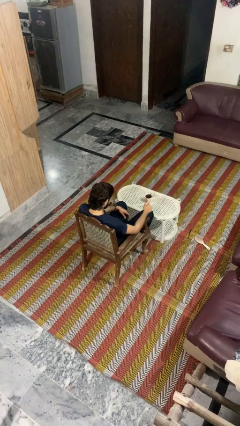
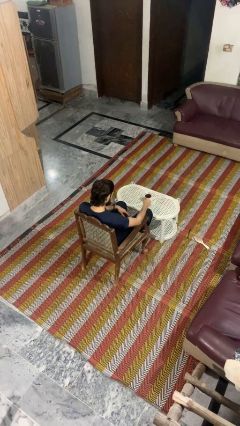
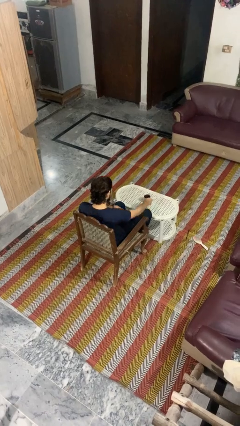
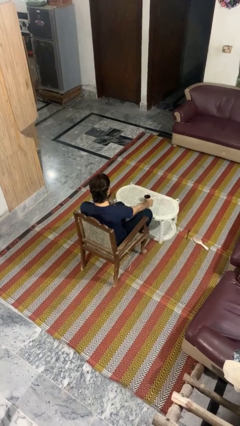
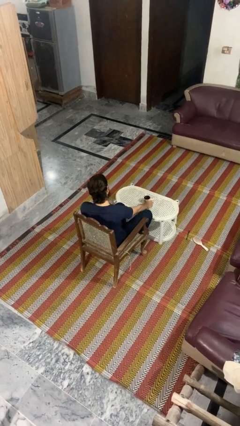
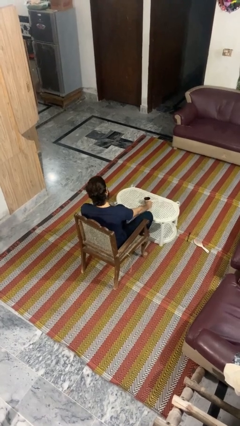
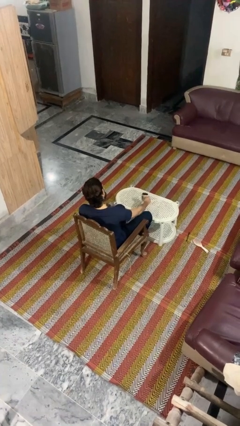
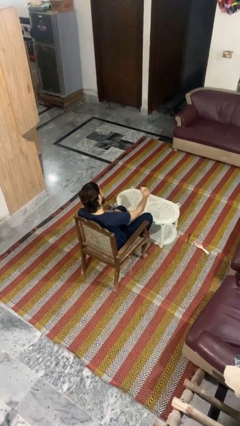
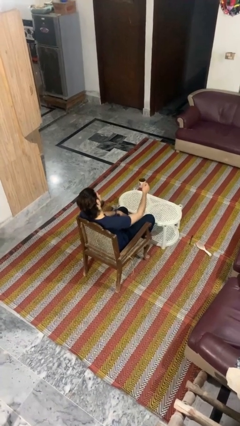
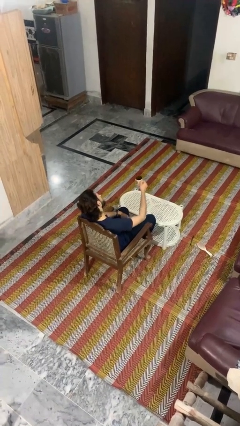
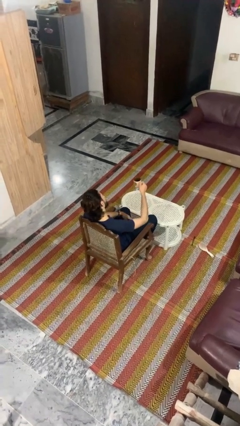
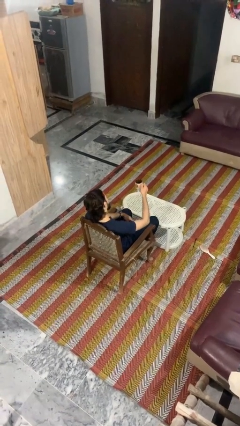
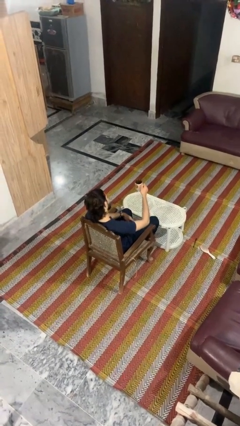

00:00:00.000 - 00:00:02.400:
person picks up object from table

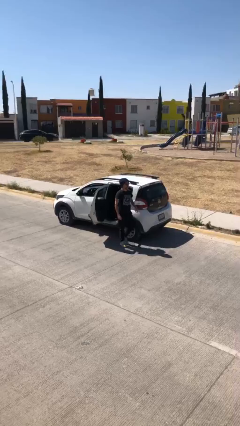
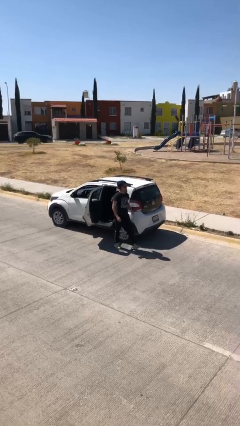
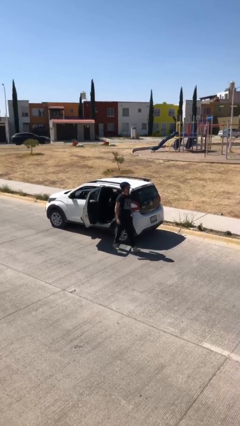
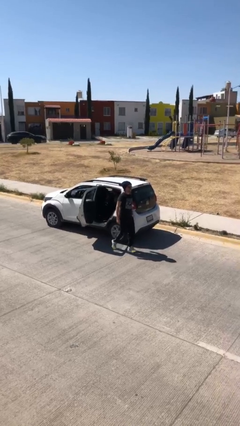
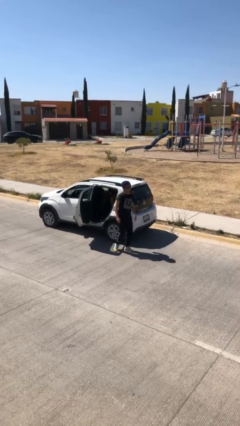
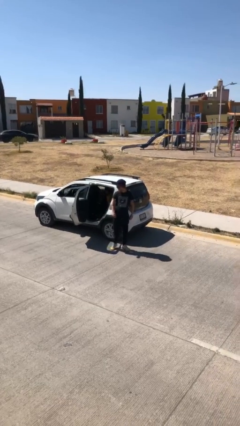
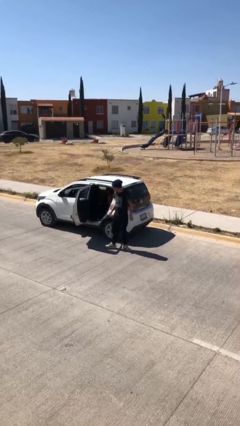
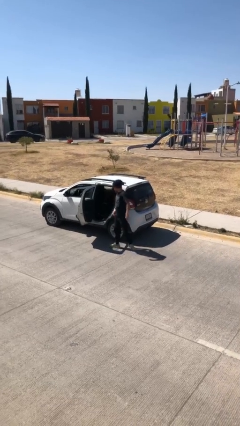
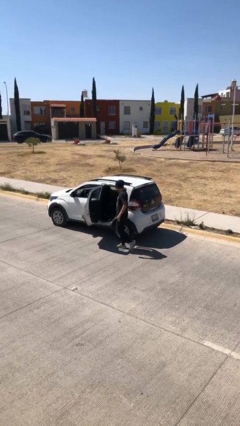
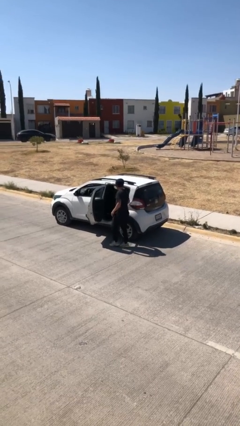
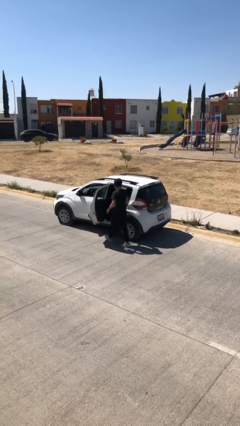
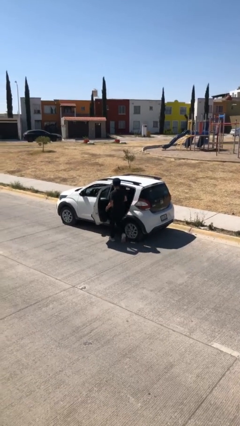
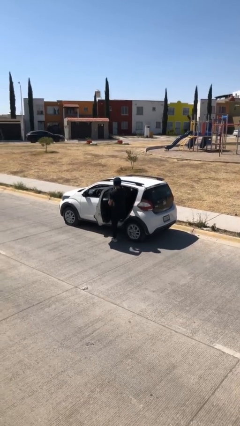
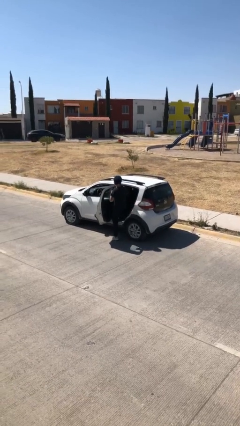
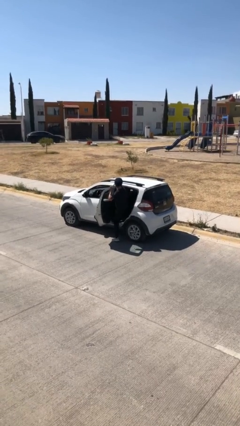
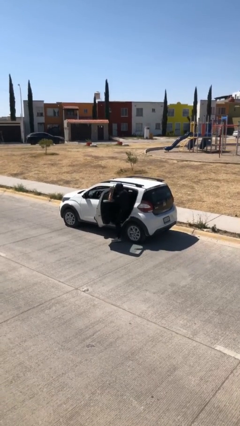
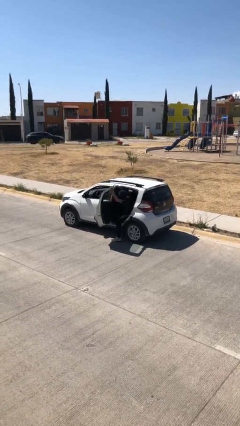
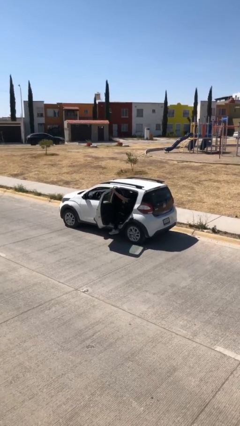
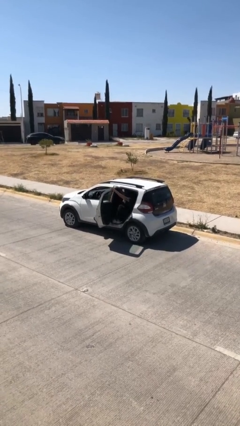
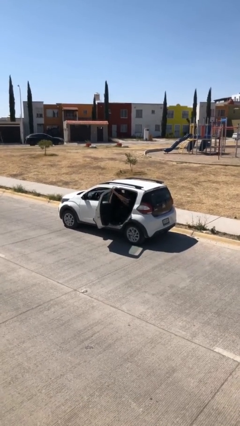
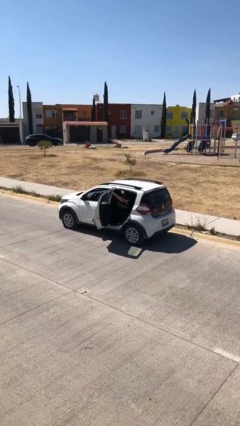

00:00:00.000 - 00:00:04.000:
person enters car

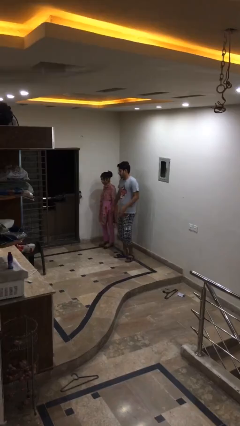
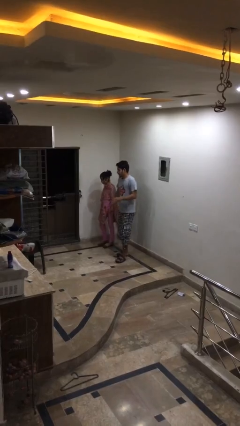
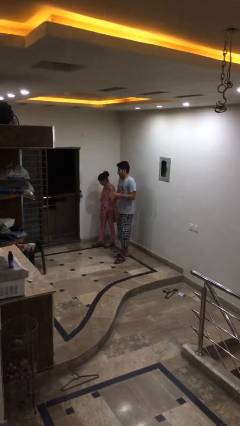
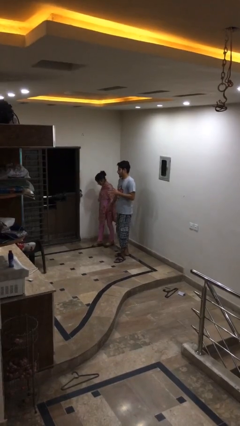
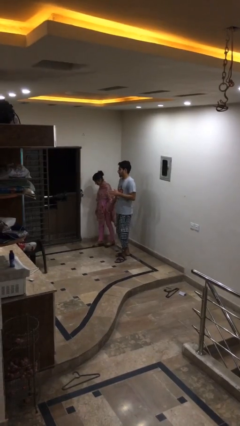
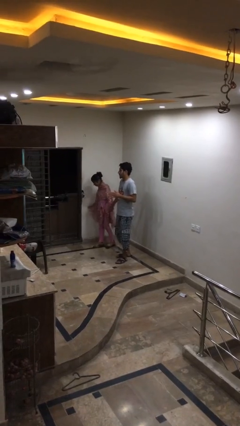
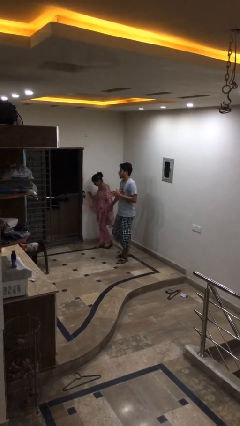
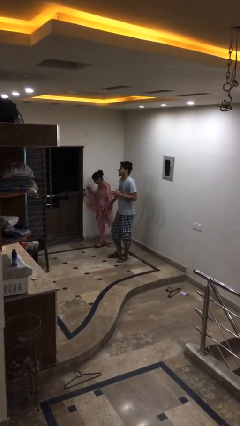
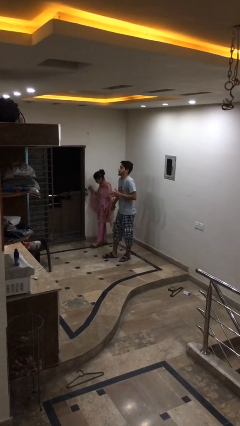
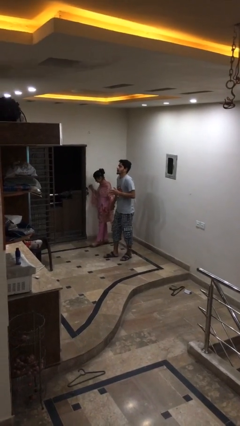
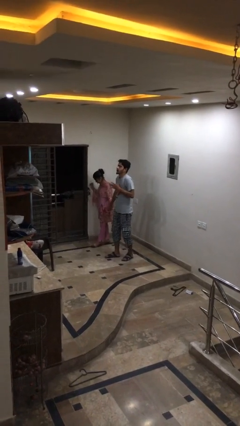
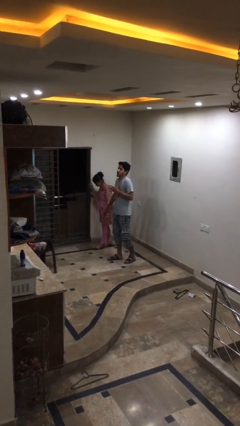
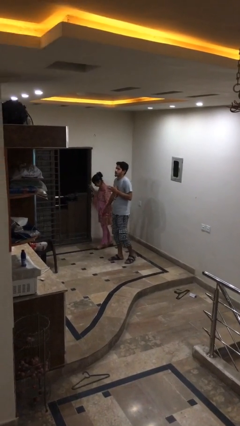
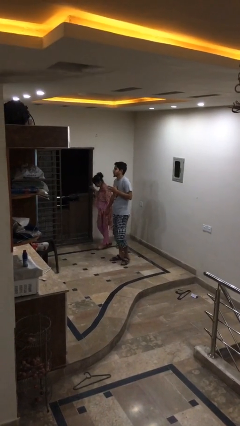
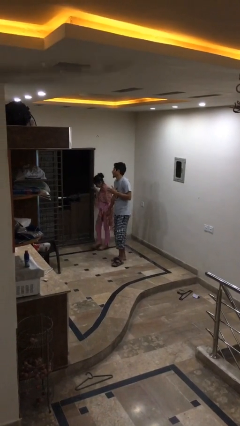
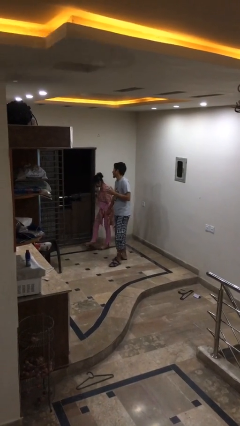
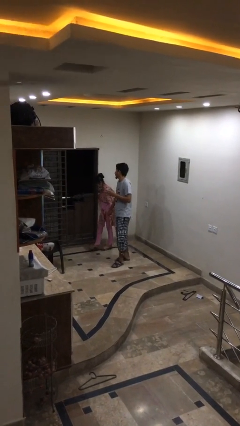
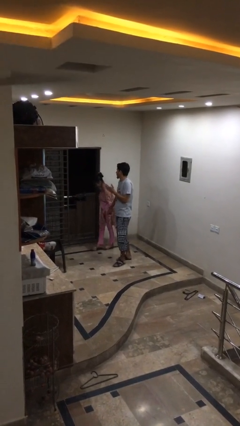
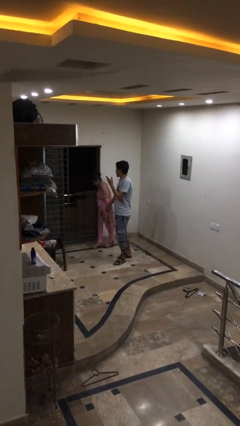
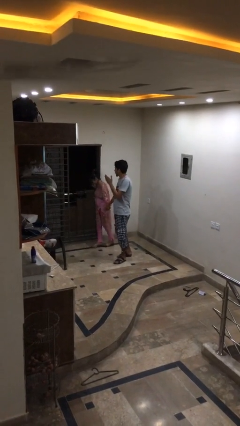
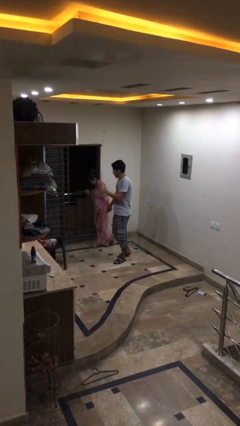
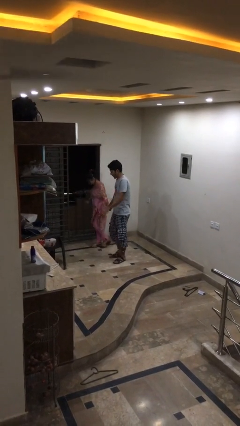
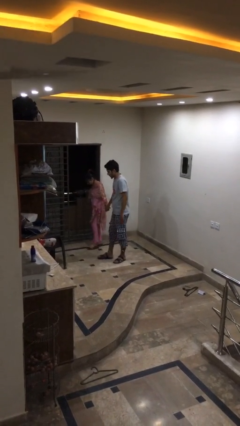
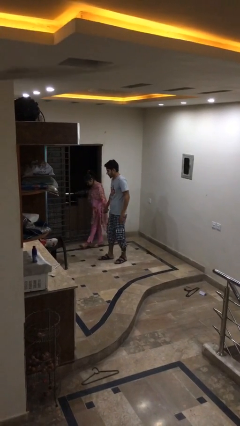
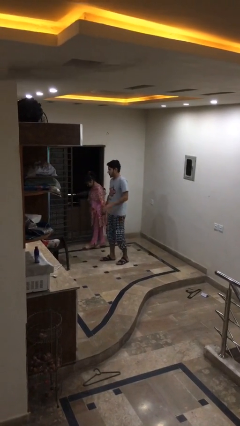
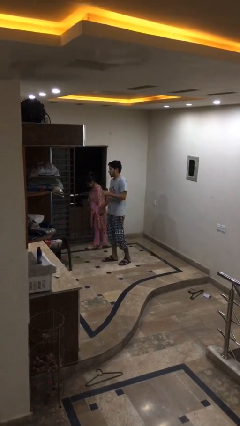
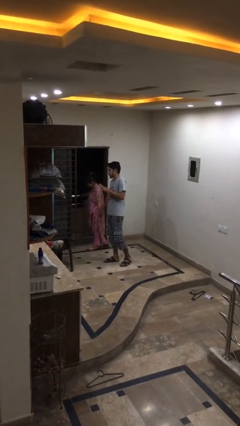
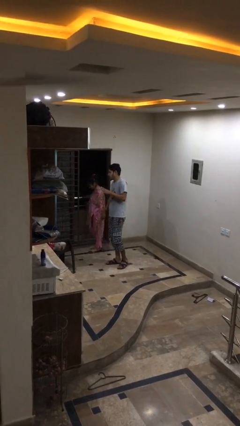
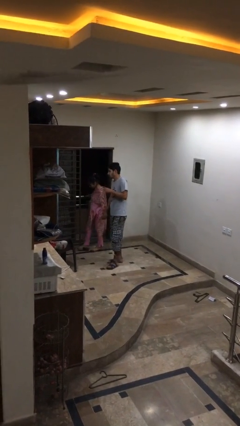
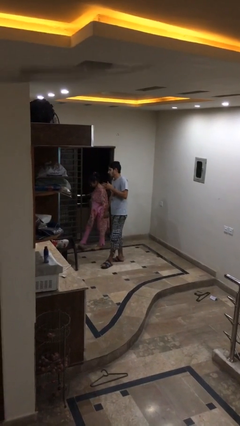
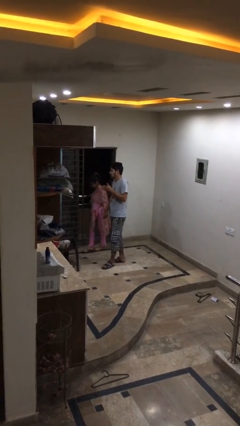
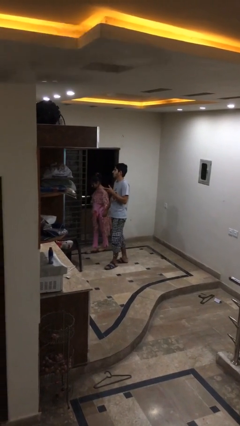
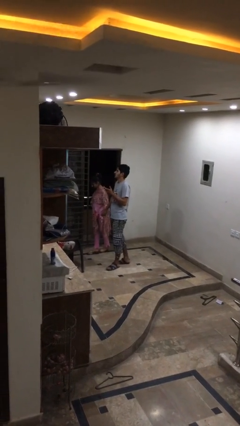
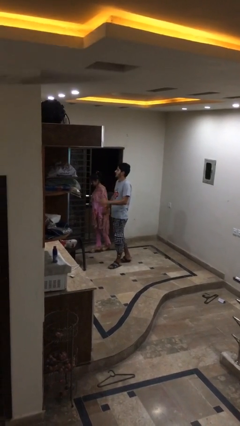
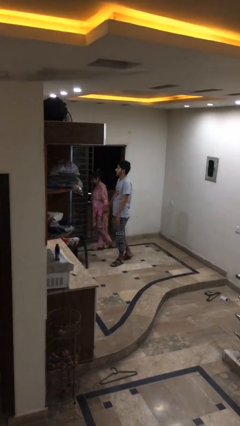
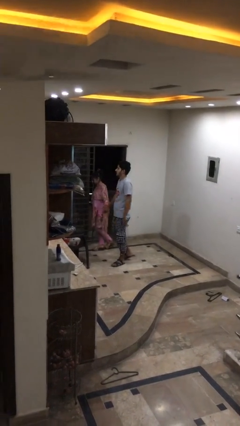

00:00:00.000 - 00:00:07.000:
person holds hand

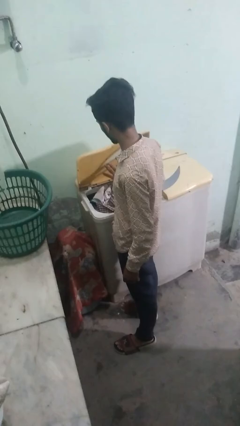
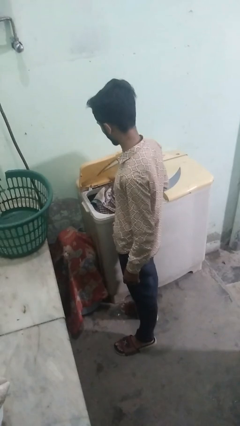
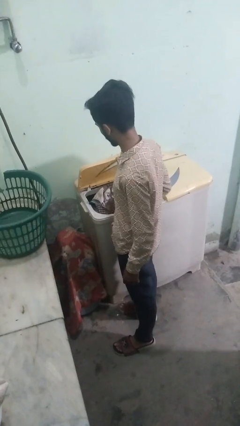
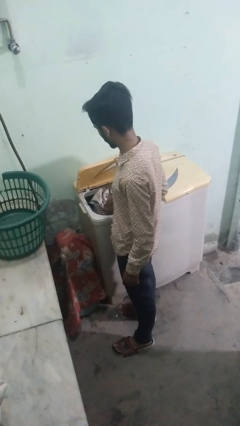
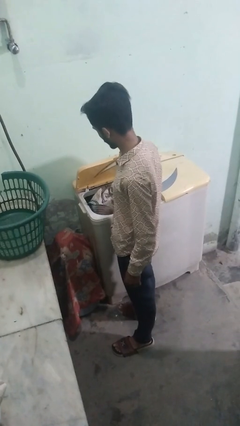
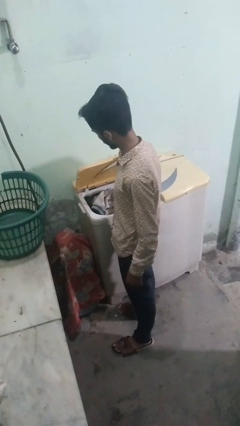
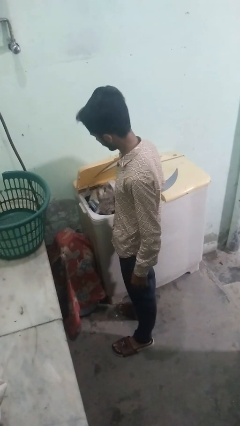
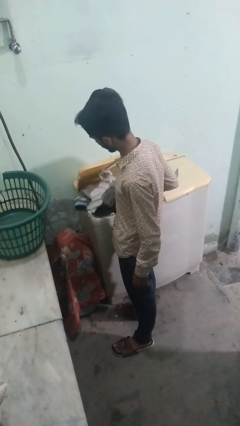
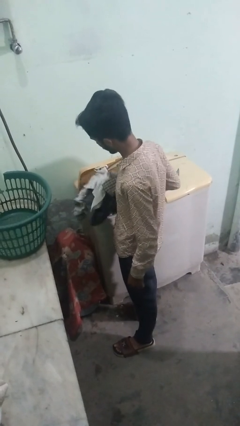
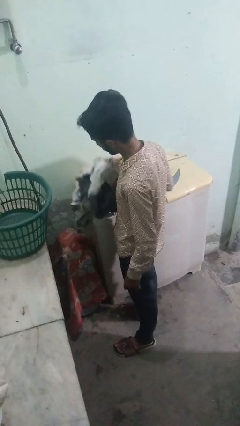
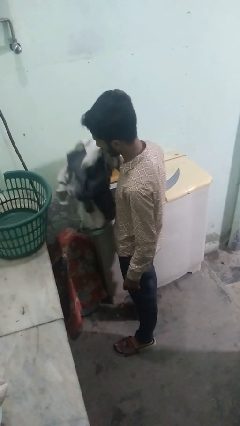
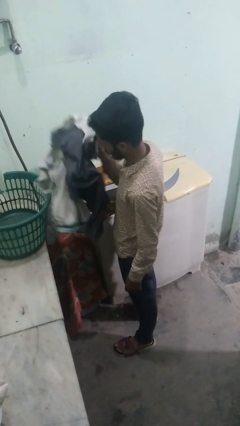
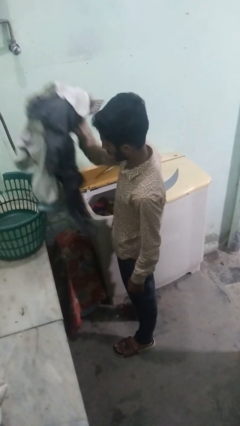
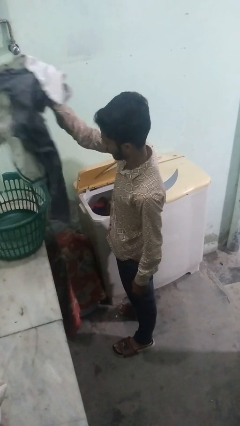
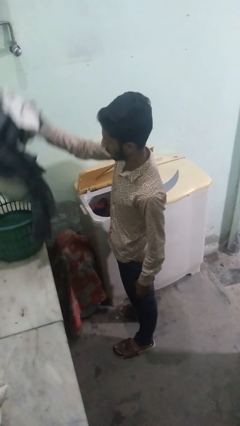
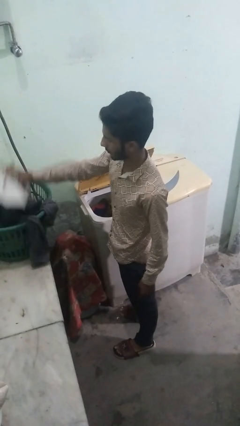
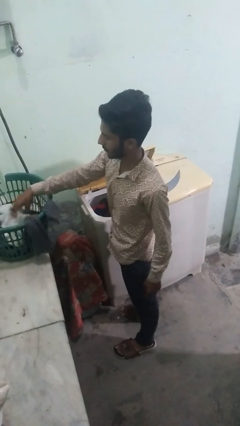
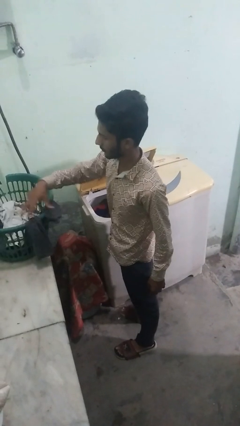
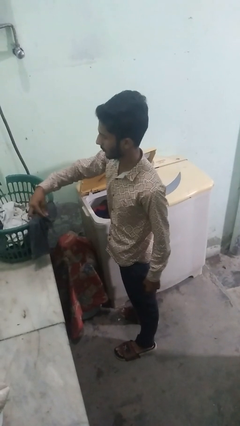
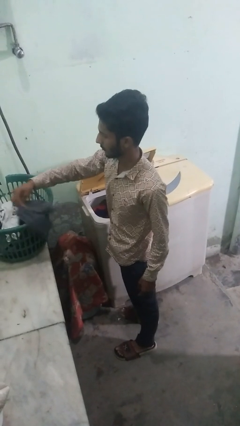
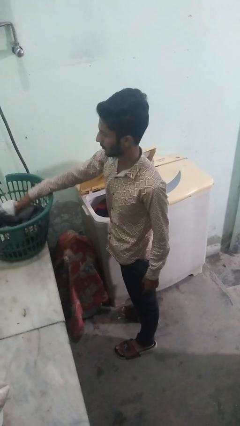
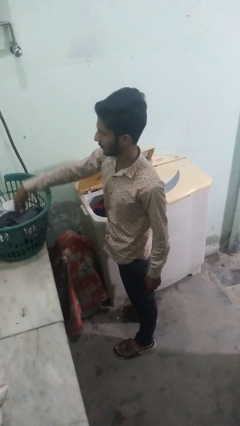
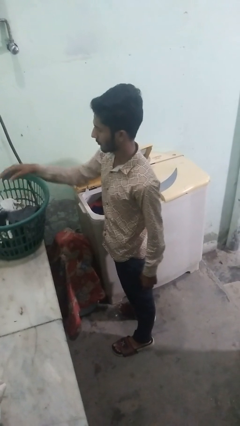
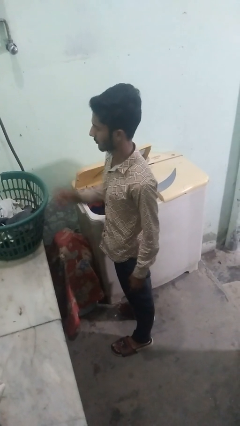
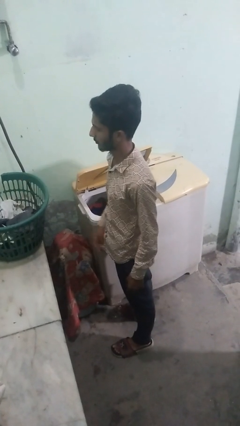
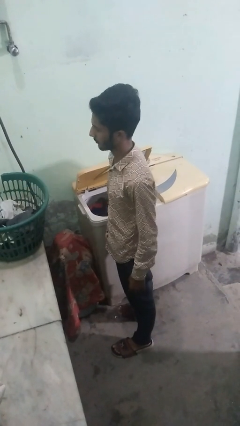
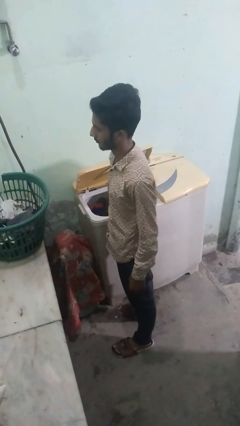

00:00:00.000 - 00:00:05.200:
person unloads clotheswasher
